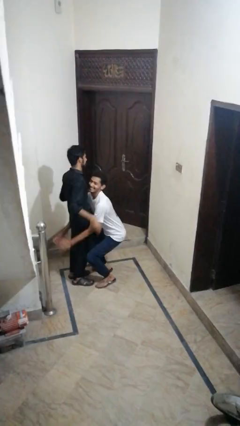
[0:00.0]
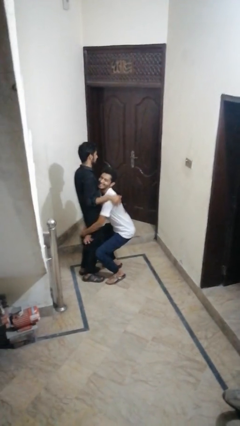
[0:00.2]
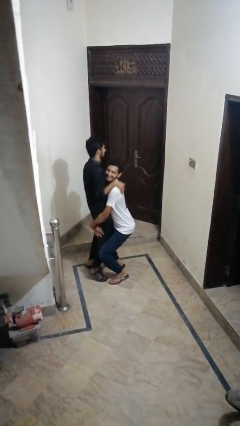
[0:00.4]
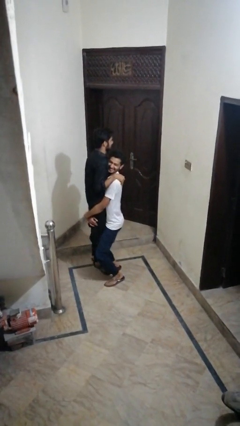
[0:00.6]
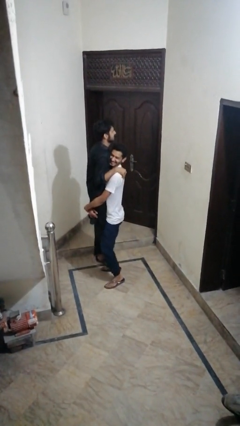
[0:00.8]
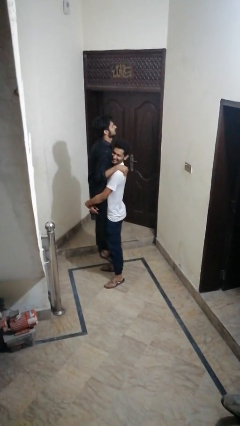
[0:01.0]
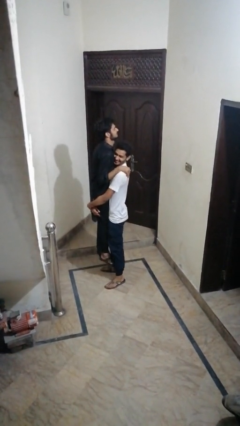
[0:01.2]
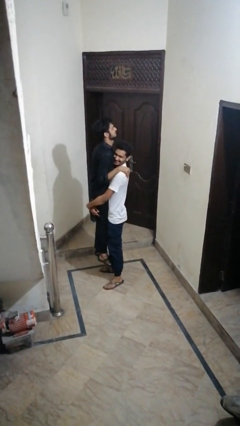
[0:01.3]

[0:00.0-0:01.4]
person takes off facemask

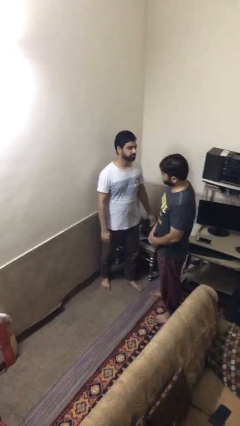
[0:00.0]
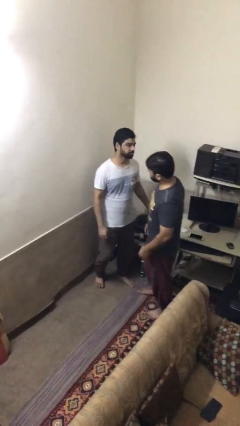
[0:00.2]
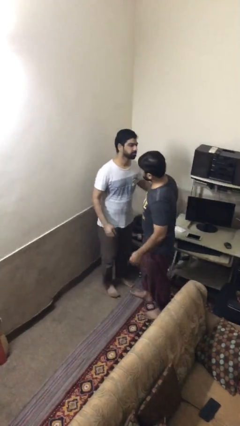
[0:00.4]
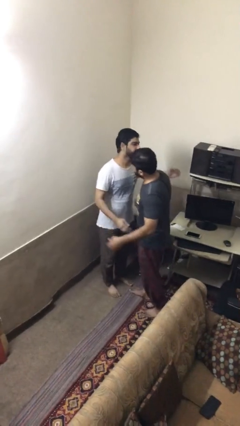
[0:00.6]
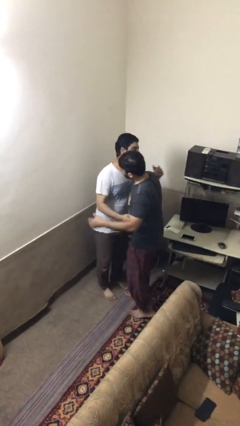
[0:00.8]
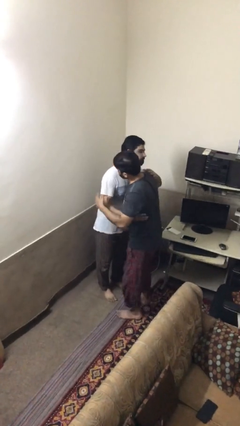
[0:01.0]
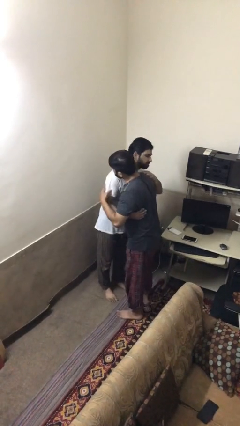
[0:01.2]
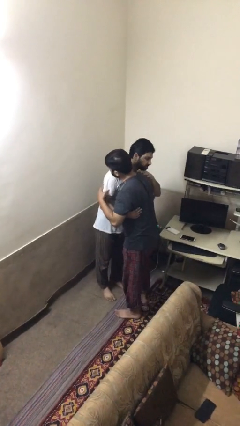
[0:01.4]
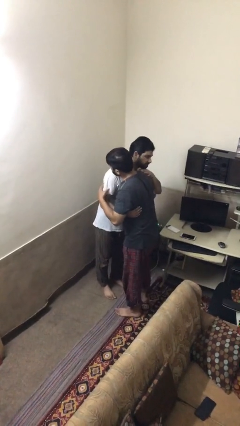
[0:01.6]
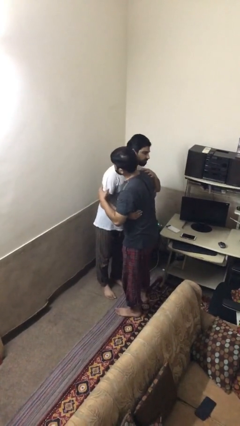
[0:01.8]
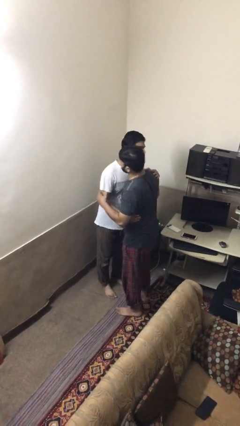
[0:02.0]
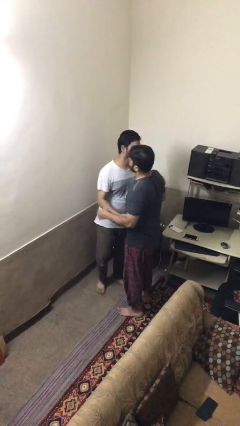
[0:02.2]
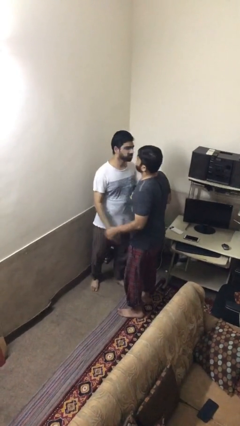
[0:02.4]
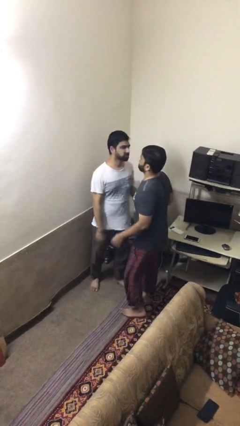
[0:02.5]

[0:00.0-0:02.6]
person embraces person

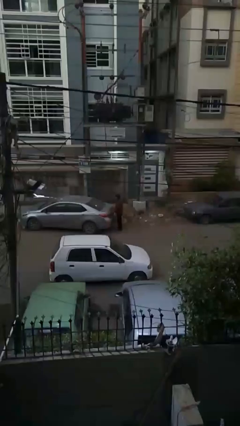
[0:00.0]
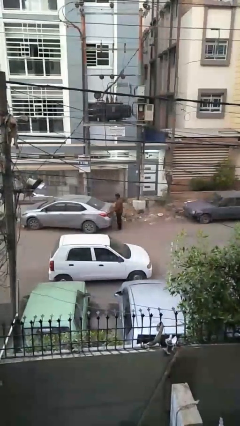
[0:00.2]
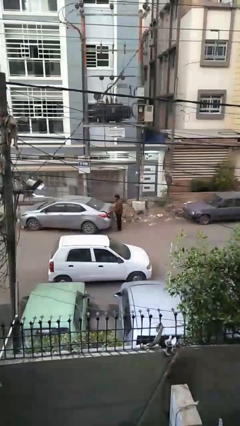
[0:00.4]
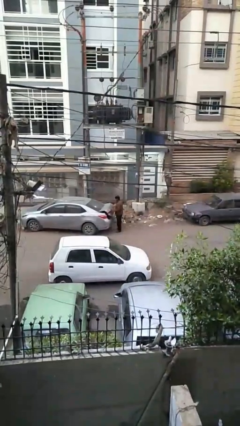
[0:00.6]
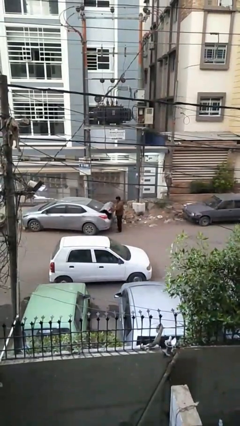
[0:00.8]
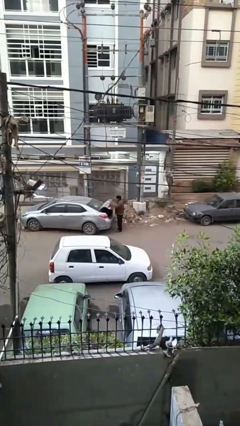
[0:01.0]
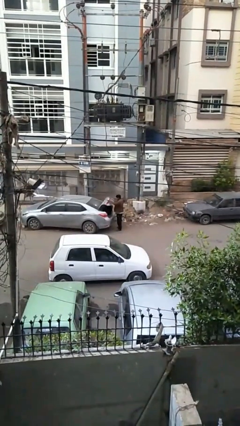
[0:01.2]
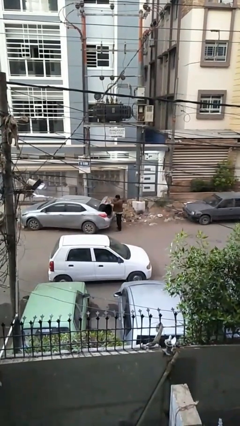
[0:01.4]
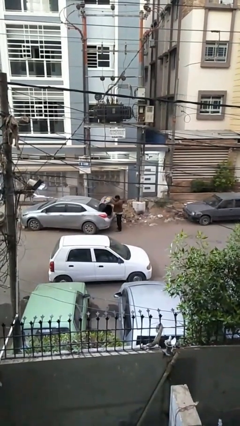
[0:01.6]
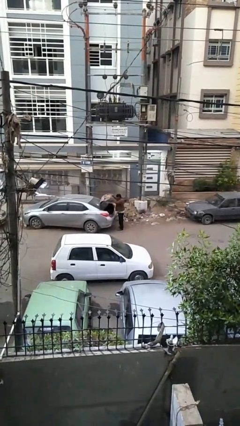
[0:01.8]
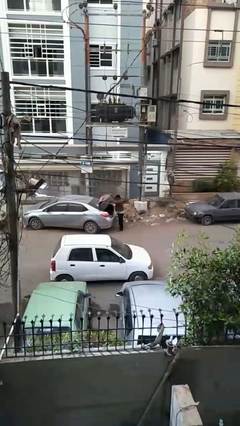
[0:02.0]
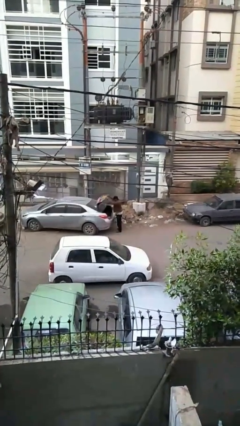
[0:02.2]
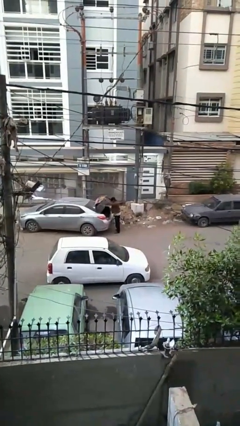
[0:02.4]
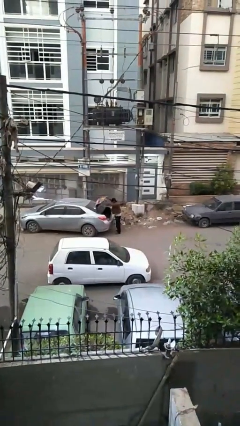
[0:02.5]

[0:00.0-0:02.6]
person opens car trunk

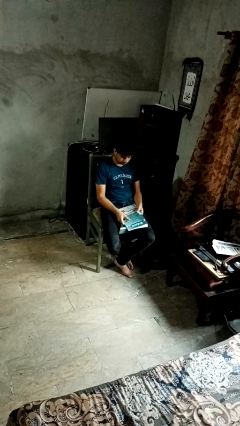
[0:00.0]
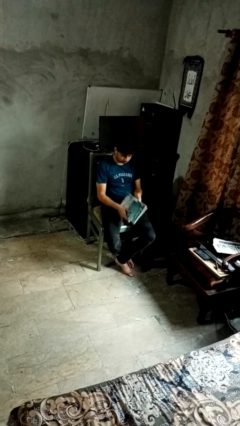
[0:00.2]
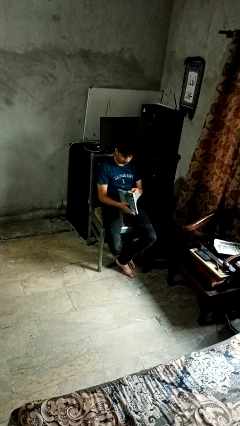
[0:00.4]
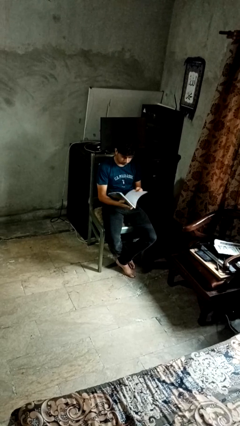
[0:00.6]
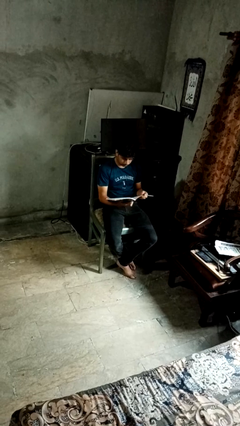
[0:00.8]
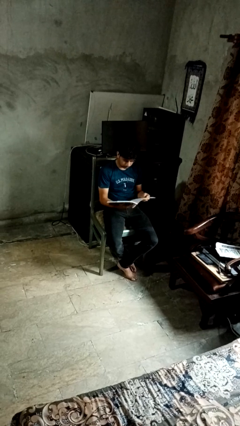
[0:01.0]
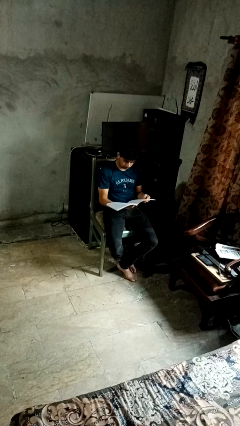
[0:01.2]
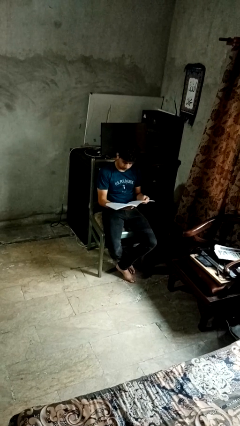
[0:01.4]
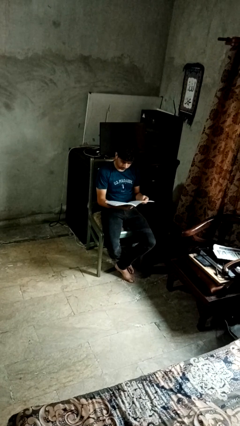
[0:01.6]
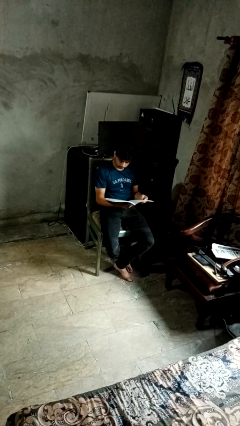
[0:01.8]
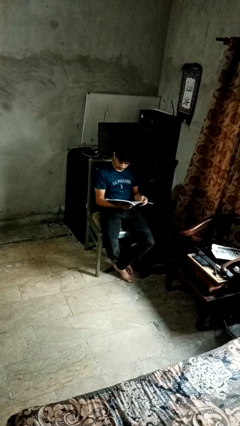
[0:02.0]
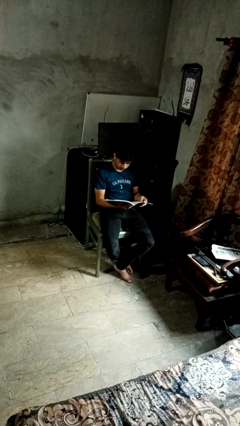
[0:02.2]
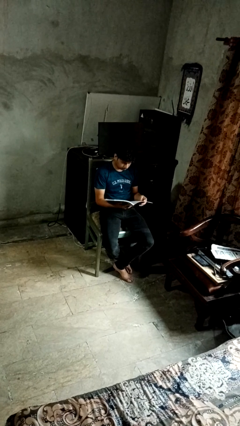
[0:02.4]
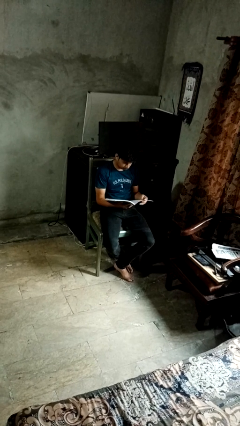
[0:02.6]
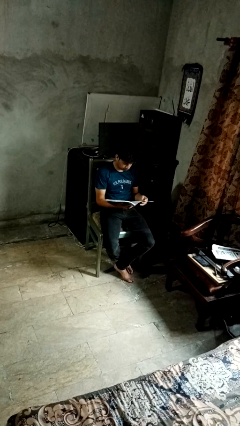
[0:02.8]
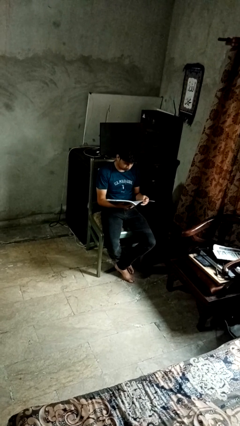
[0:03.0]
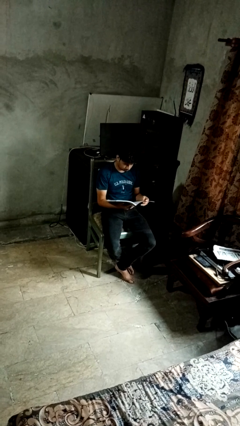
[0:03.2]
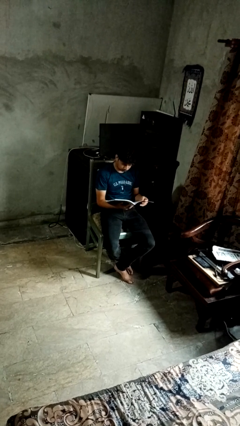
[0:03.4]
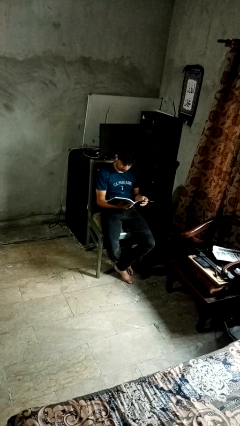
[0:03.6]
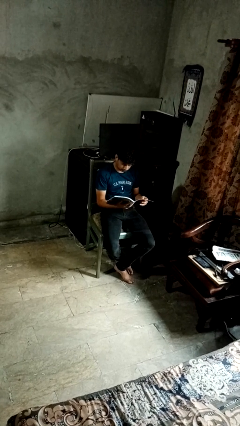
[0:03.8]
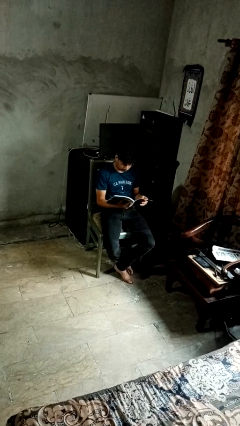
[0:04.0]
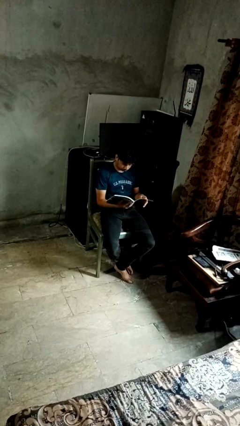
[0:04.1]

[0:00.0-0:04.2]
person reads book

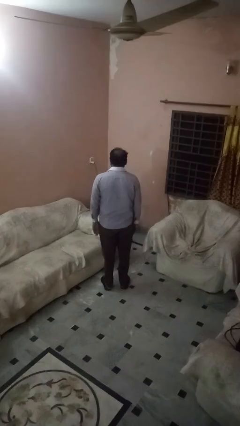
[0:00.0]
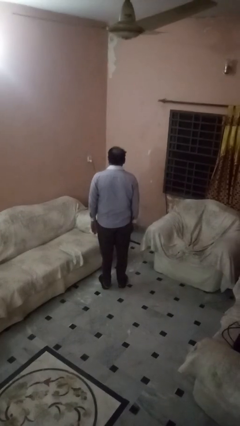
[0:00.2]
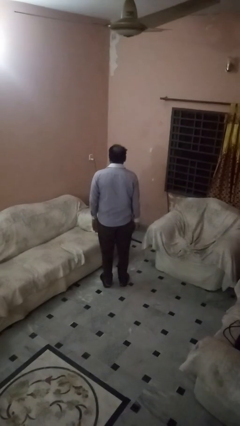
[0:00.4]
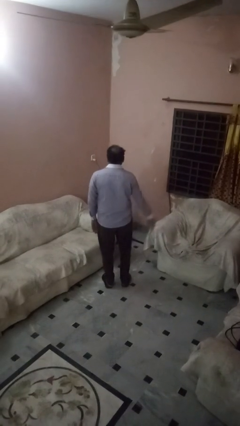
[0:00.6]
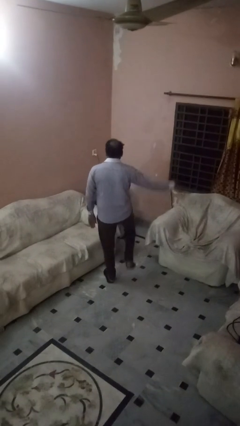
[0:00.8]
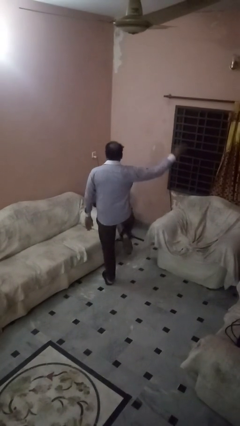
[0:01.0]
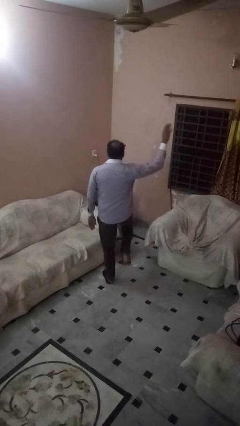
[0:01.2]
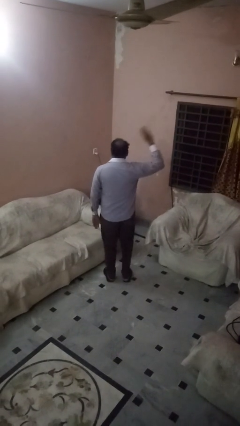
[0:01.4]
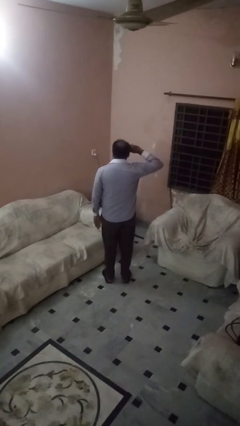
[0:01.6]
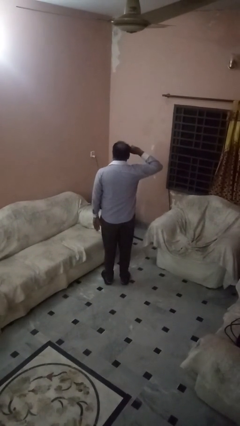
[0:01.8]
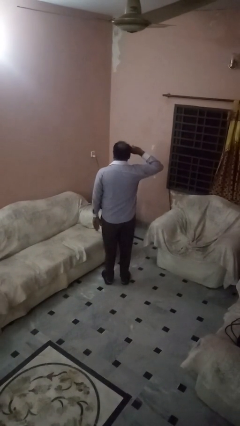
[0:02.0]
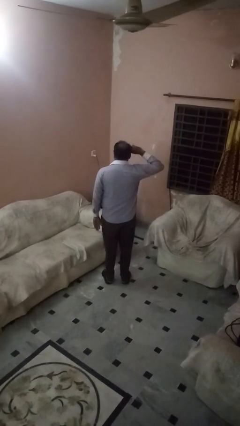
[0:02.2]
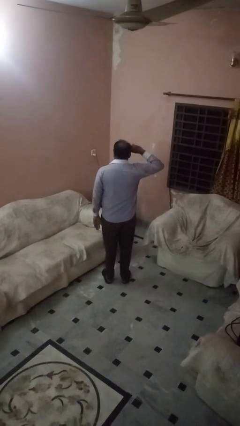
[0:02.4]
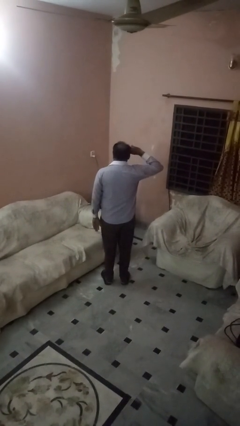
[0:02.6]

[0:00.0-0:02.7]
person salutes

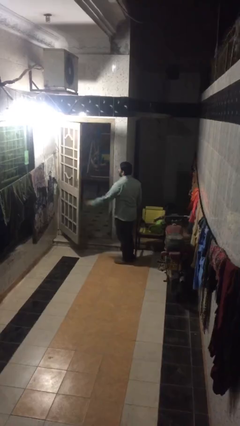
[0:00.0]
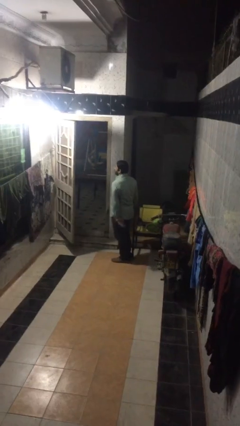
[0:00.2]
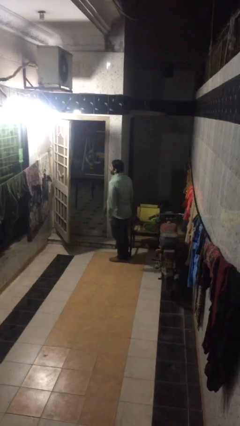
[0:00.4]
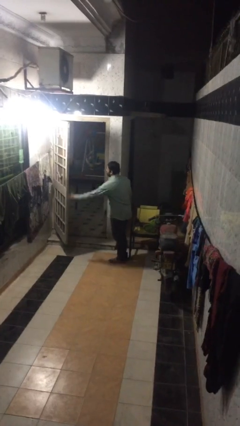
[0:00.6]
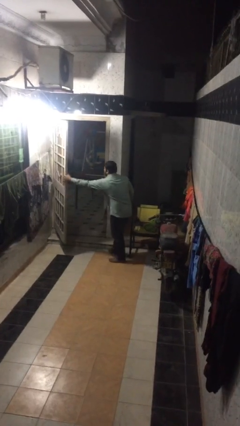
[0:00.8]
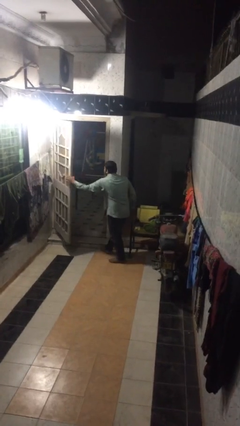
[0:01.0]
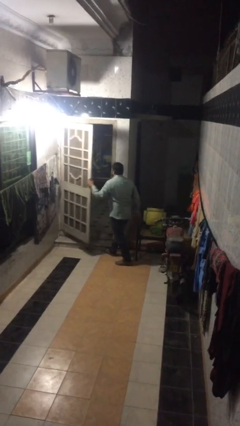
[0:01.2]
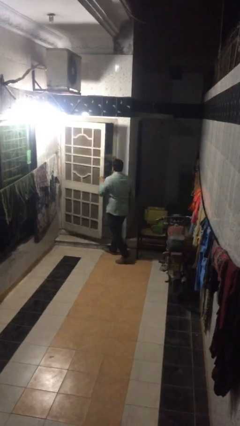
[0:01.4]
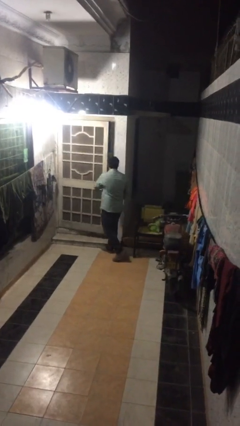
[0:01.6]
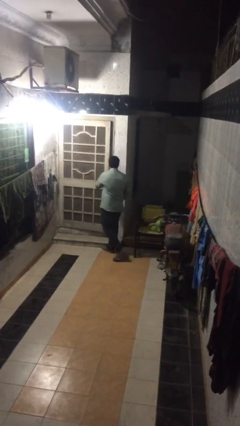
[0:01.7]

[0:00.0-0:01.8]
person closes facility door

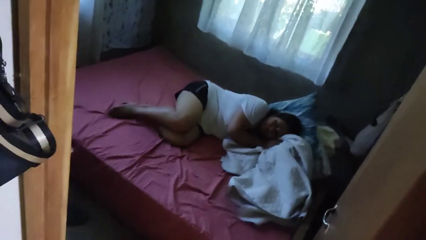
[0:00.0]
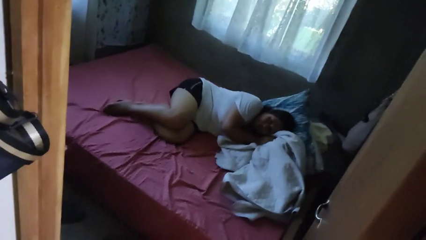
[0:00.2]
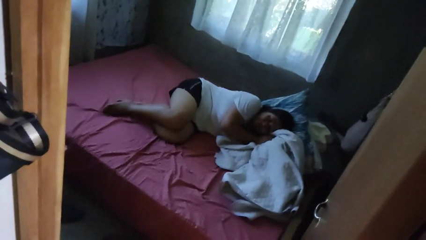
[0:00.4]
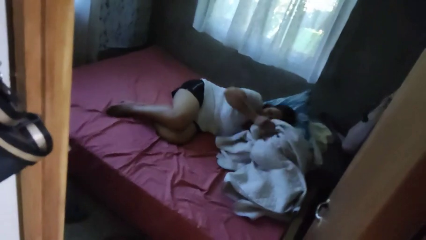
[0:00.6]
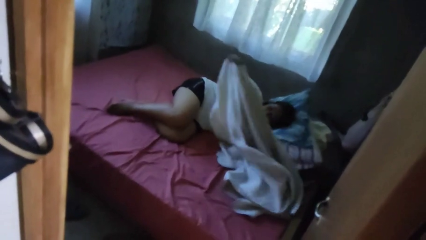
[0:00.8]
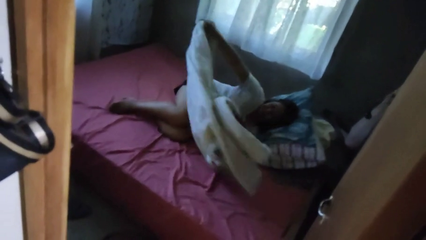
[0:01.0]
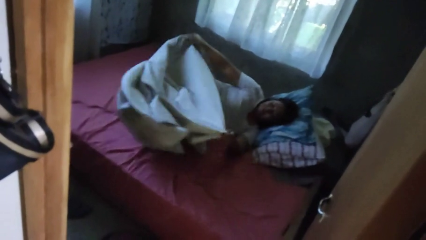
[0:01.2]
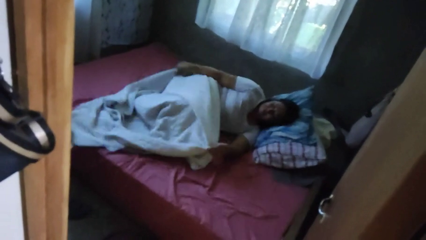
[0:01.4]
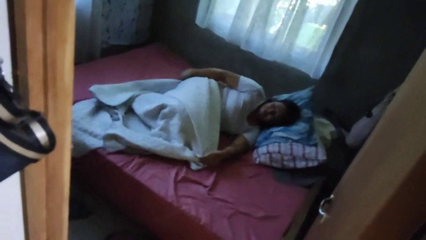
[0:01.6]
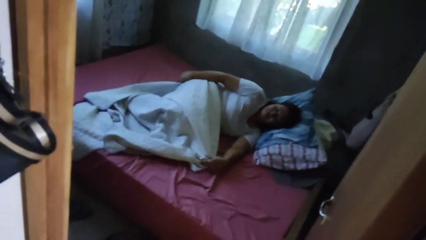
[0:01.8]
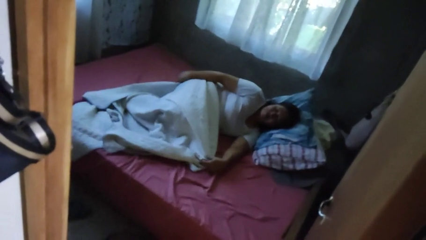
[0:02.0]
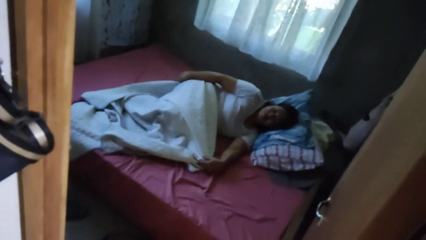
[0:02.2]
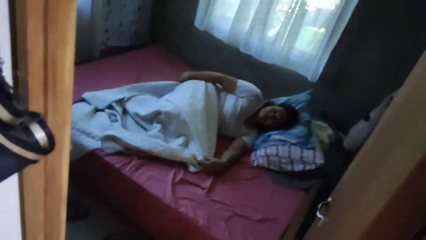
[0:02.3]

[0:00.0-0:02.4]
person covers with bedsheets
